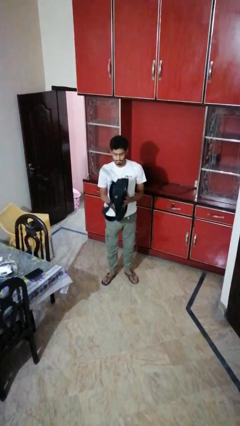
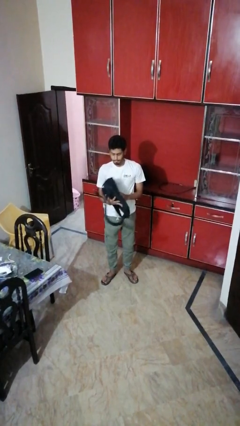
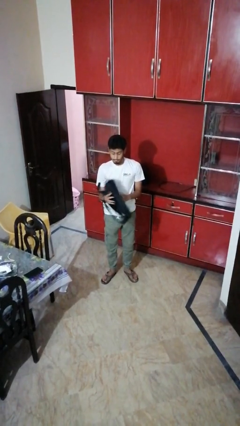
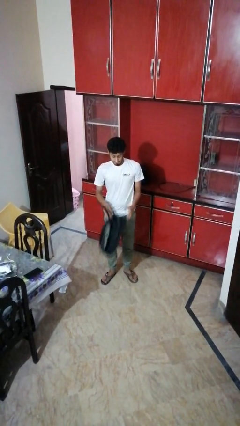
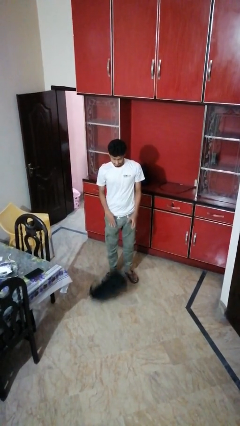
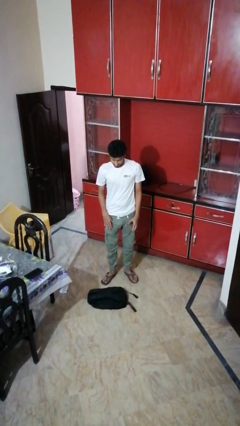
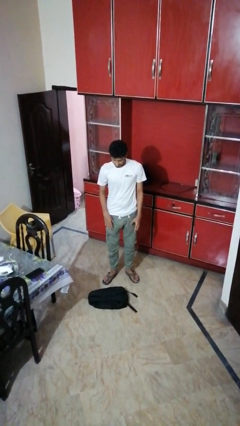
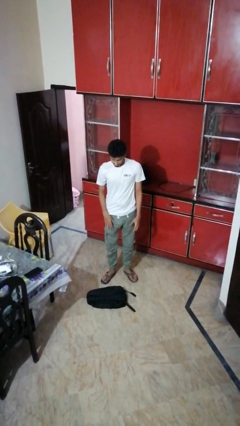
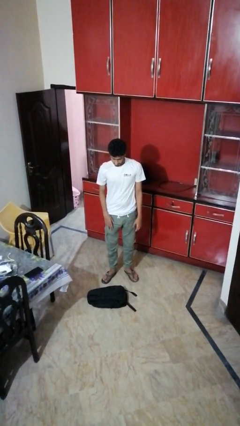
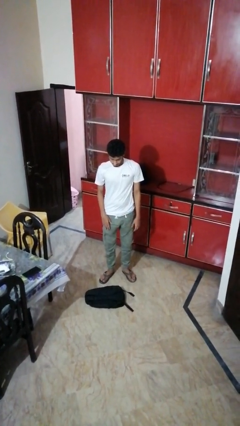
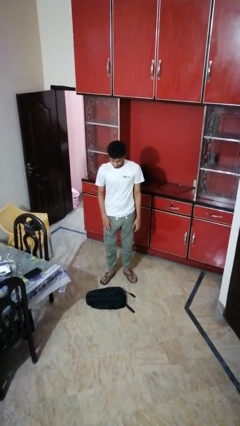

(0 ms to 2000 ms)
person drops object

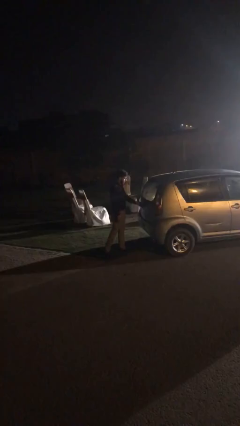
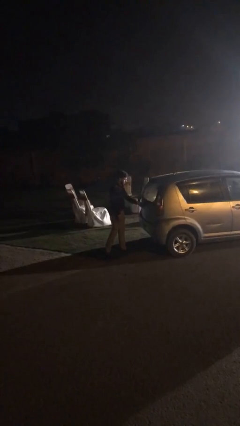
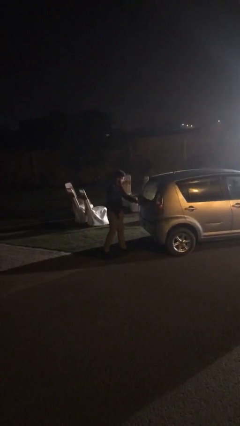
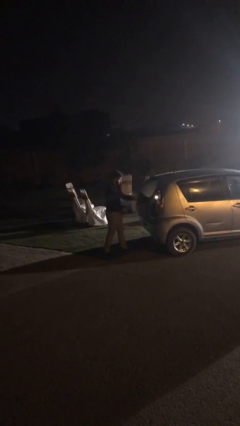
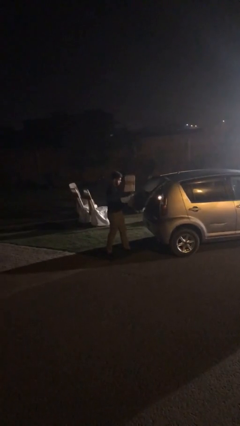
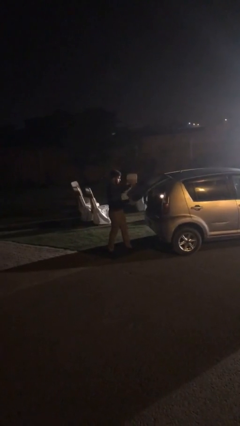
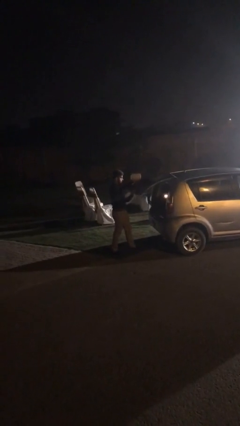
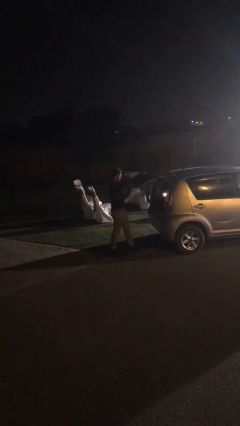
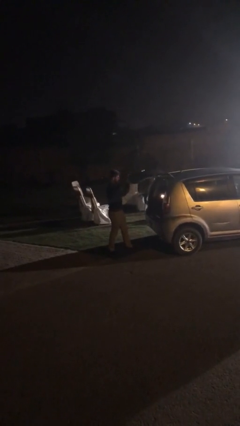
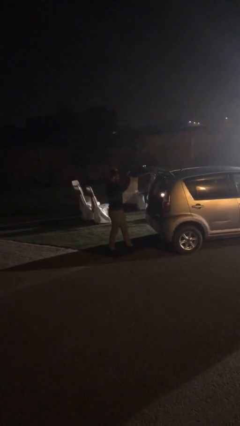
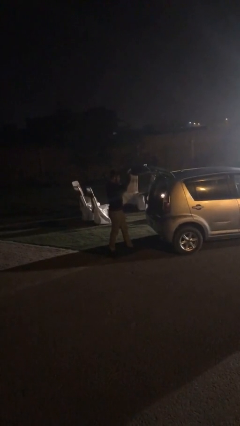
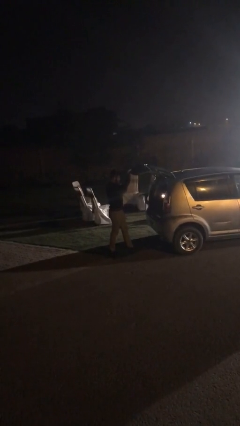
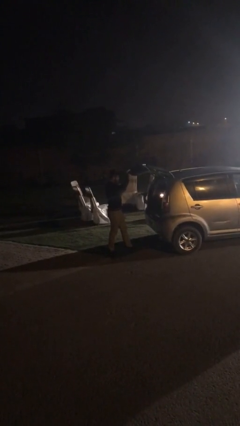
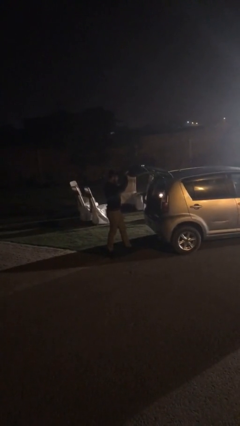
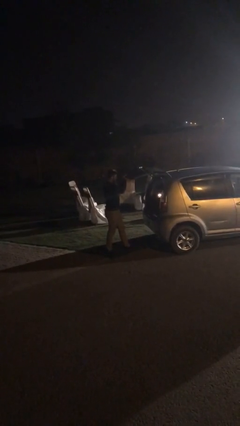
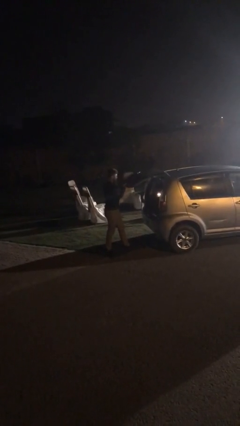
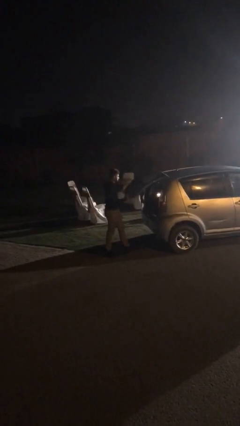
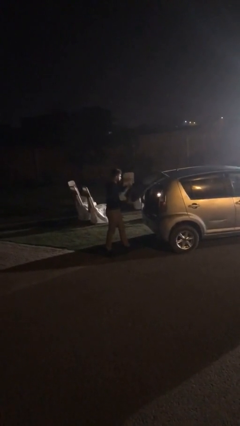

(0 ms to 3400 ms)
person opens car trunk

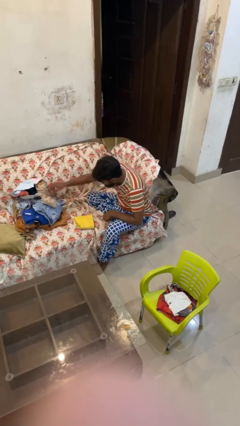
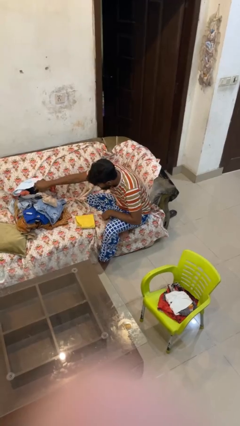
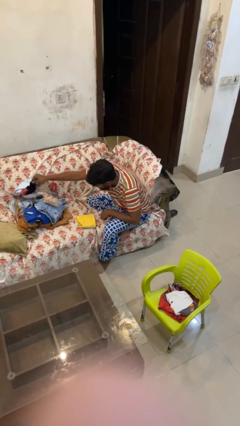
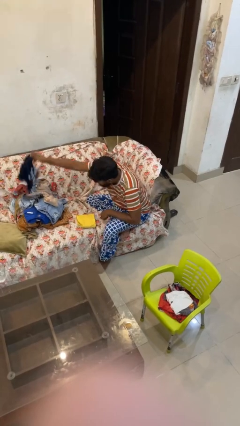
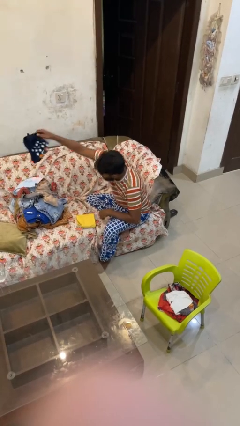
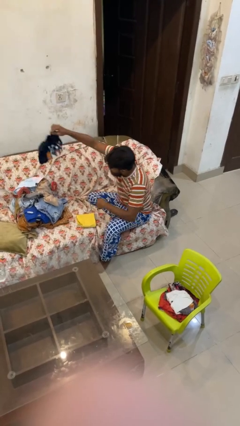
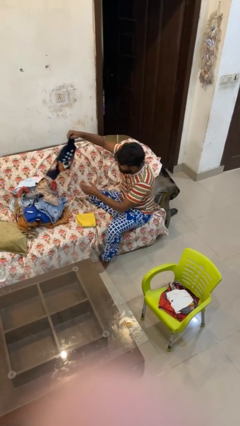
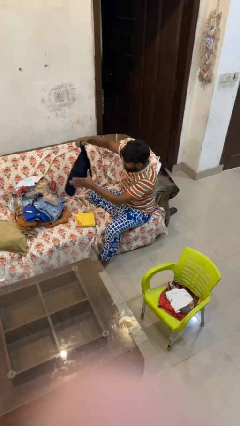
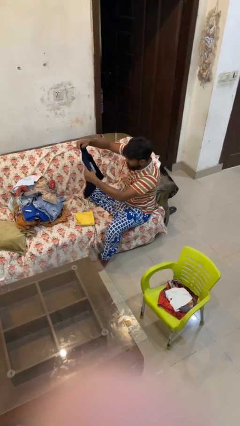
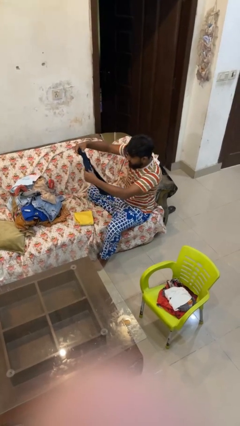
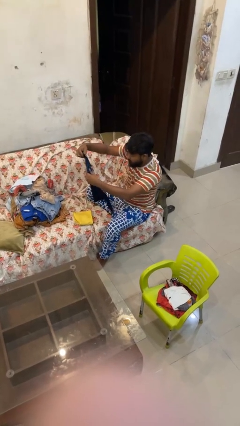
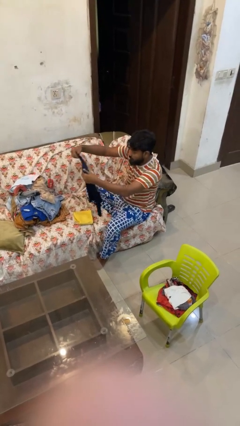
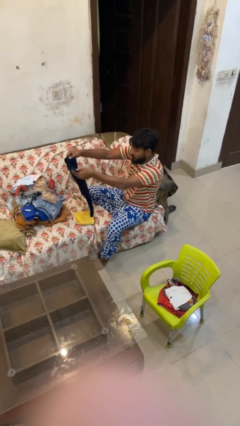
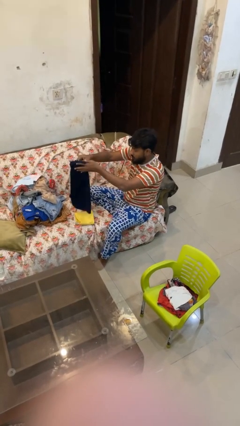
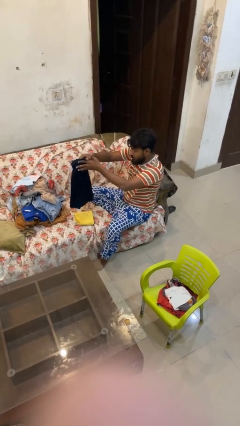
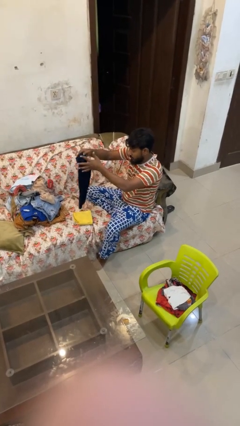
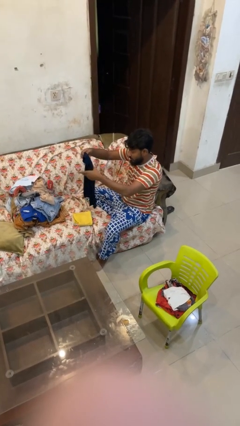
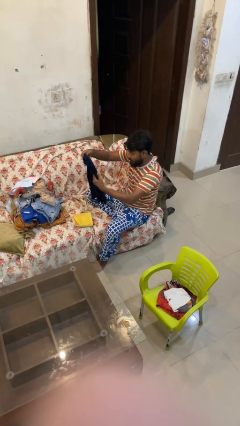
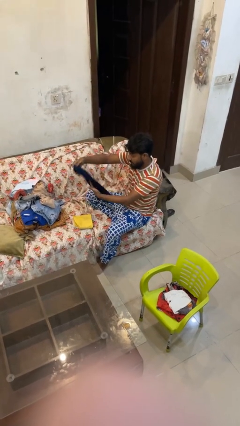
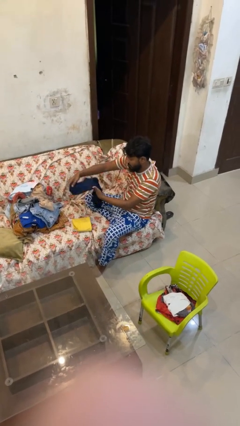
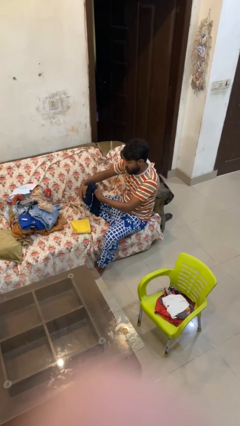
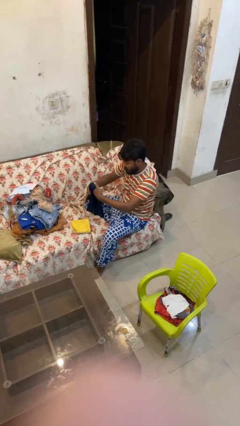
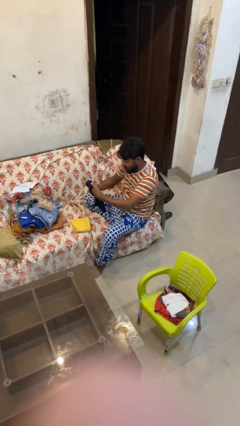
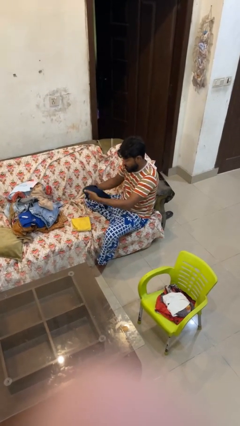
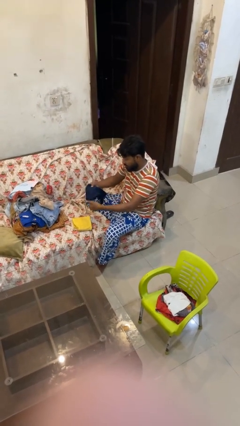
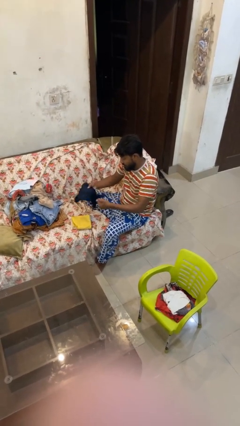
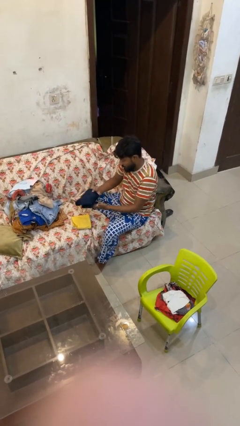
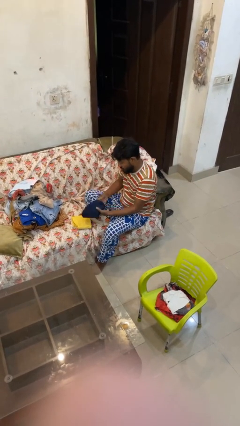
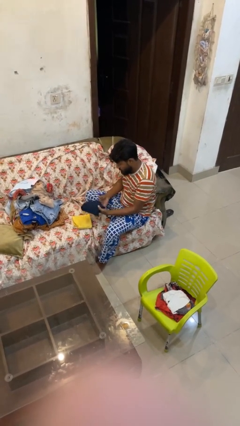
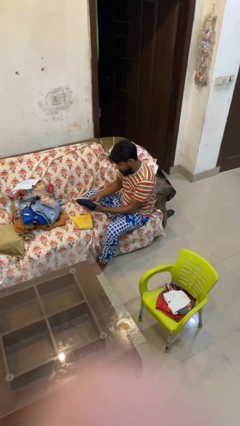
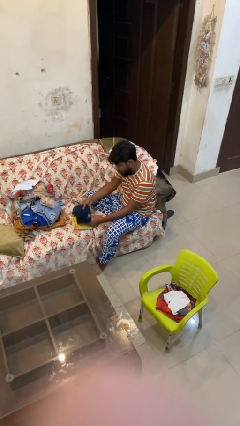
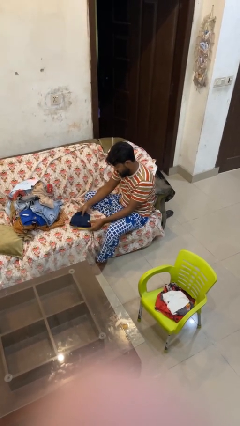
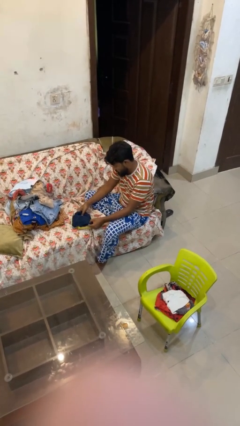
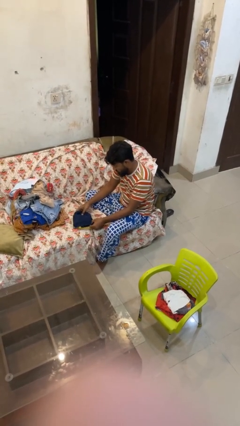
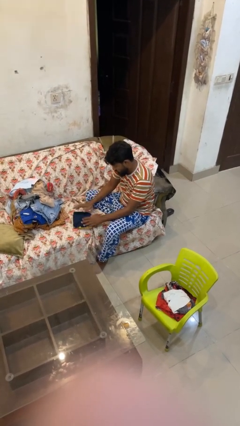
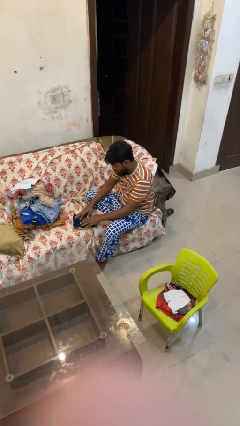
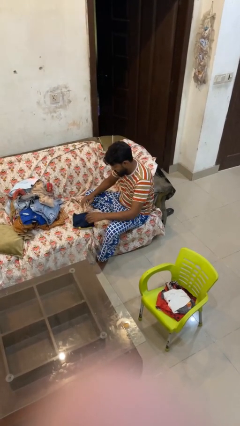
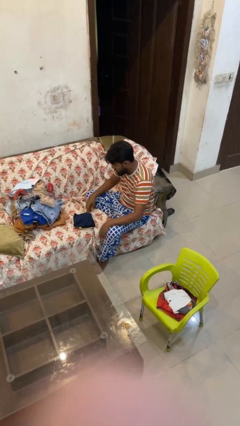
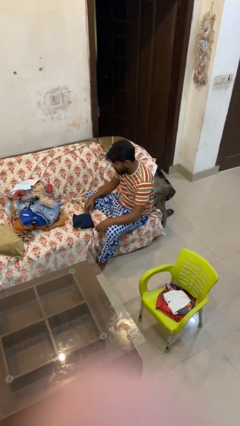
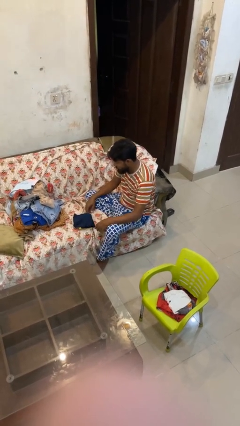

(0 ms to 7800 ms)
person folds shirt

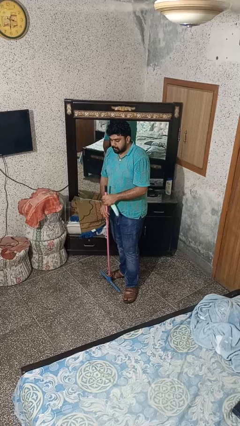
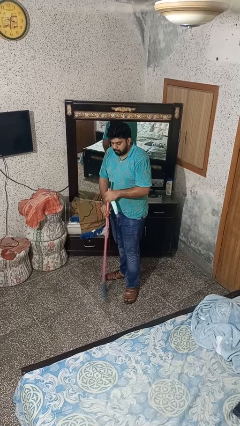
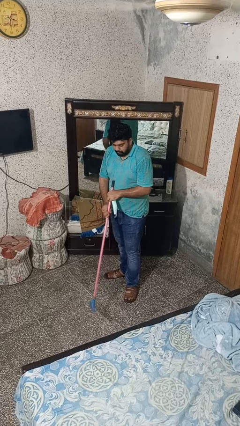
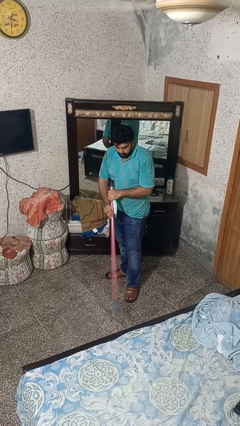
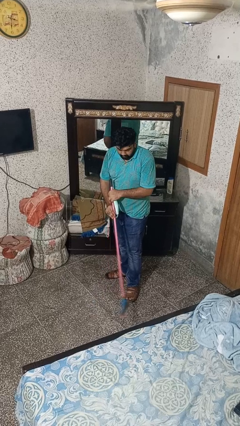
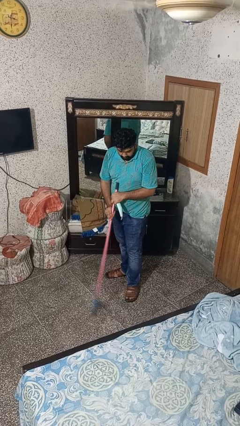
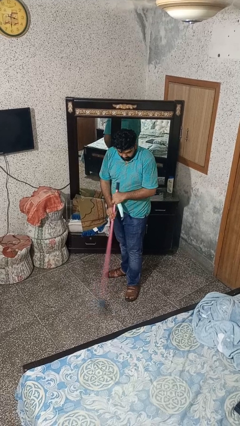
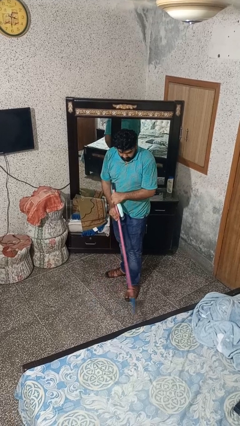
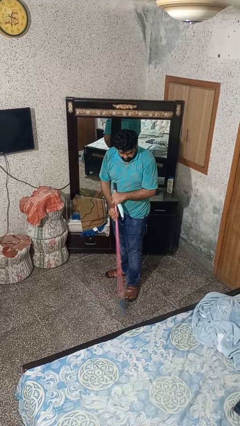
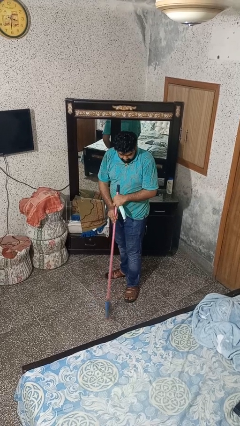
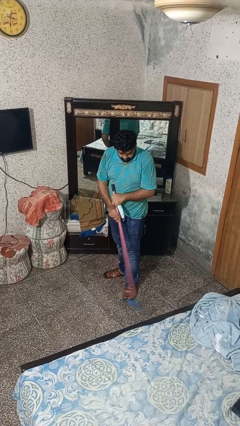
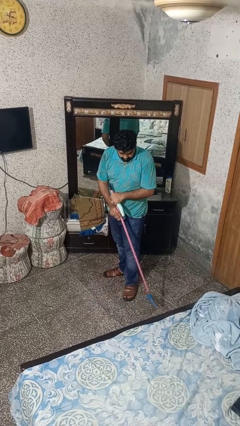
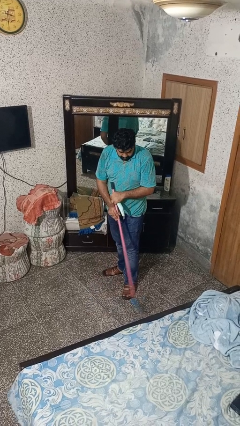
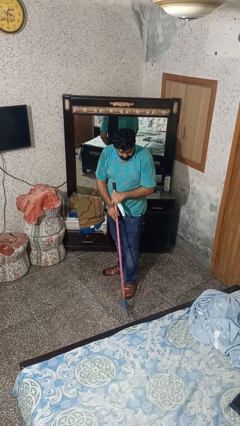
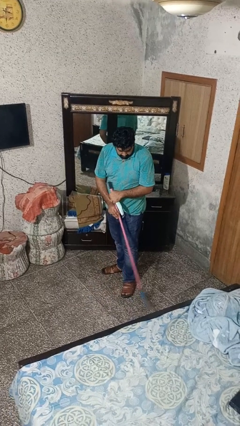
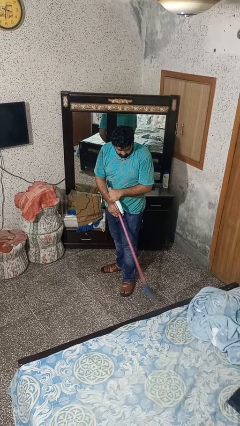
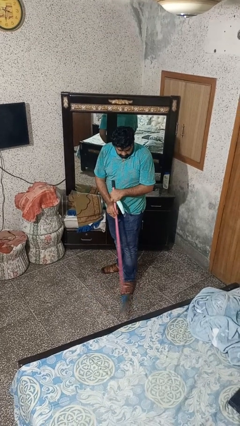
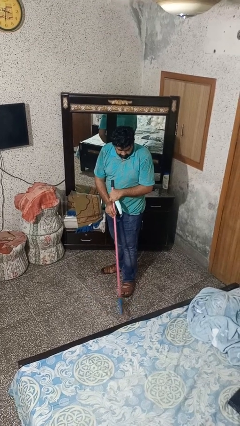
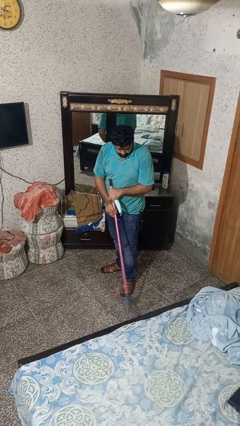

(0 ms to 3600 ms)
person sweeps floor

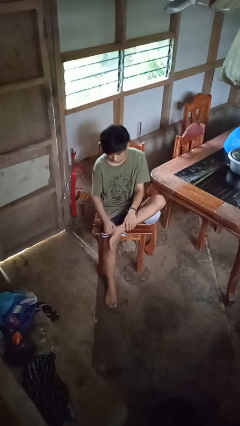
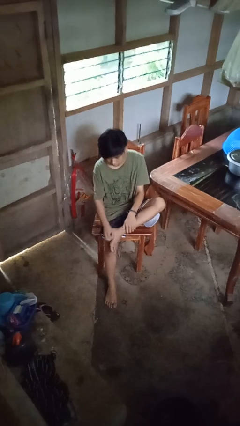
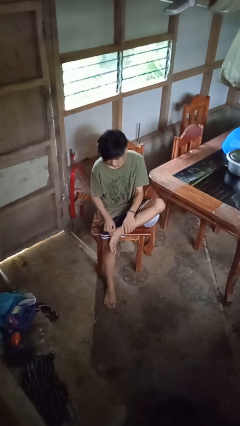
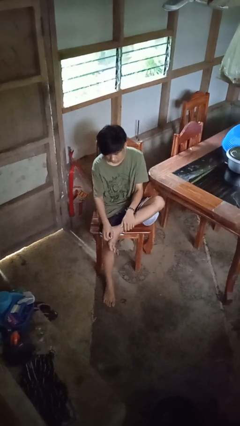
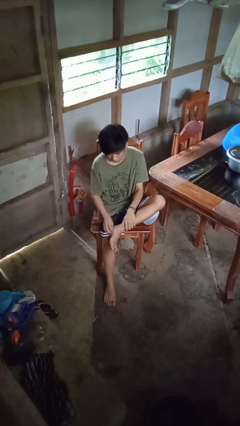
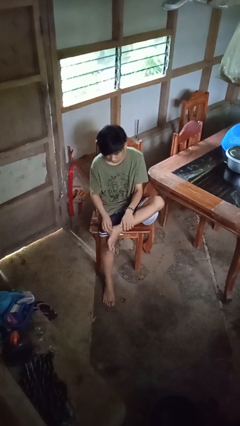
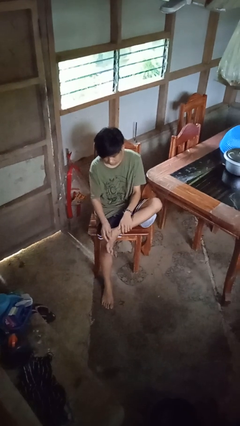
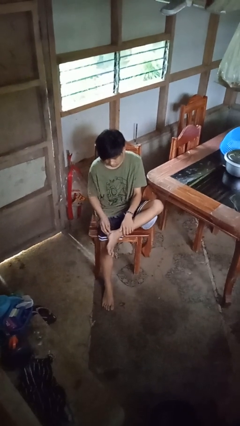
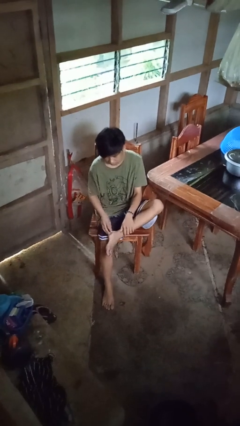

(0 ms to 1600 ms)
person rubs foot
